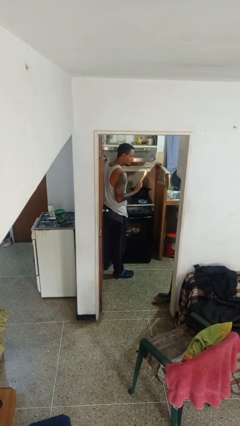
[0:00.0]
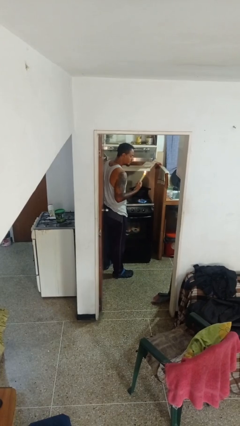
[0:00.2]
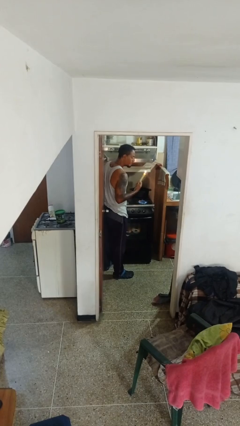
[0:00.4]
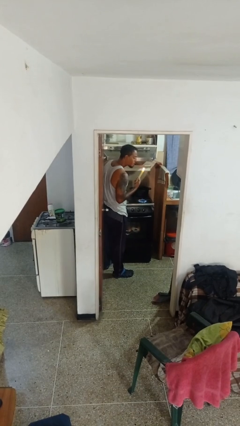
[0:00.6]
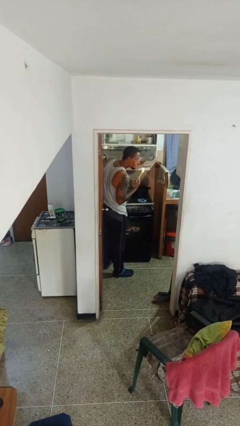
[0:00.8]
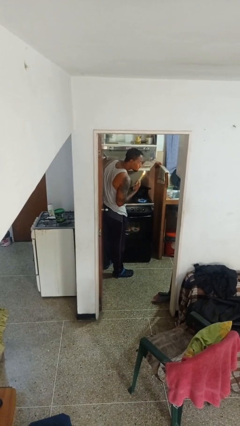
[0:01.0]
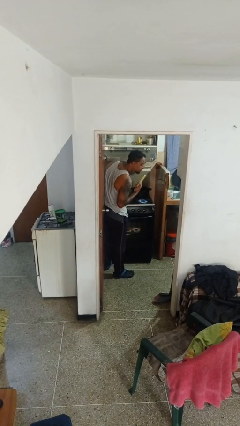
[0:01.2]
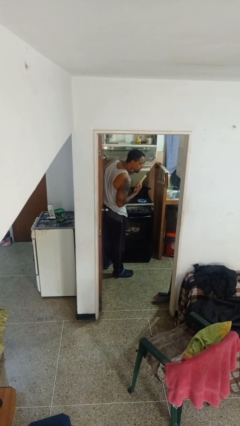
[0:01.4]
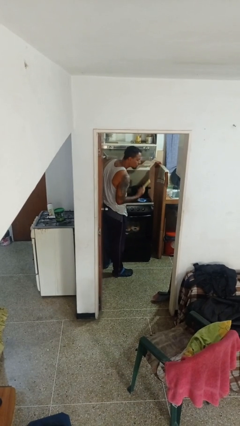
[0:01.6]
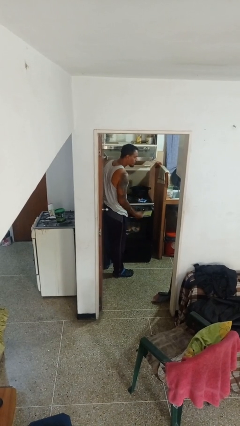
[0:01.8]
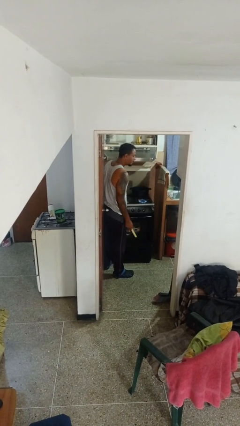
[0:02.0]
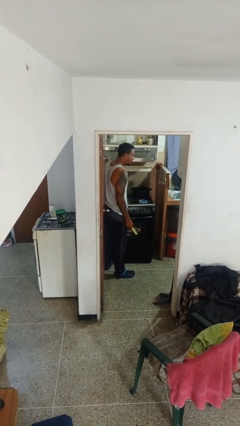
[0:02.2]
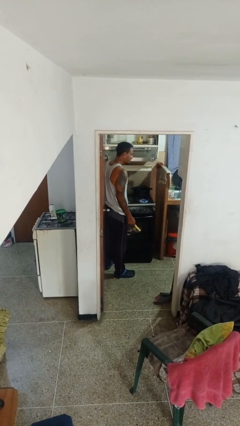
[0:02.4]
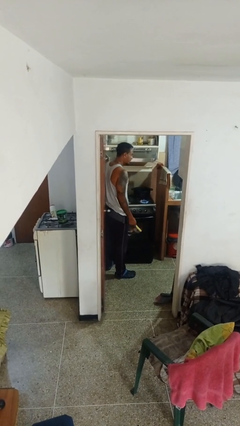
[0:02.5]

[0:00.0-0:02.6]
person extinguishes candle

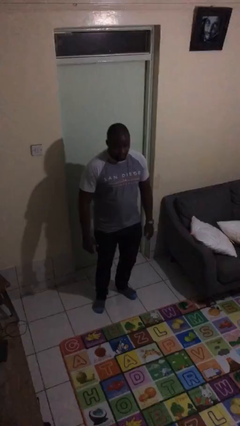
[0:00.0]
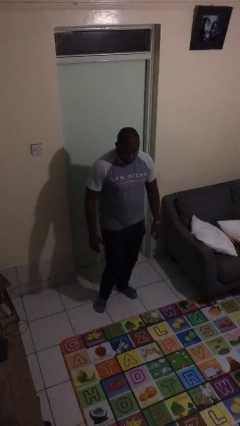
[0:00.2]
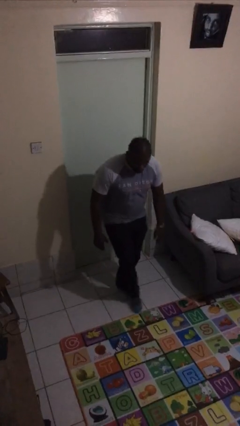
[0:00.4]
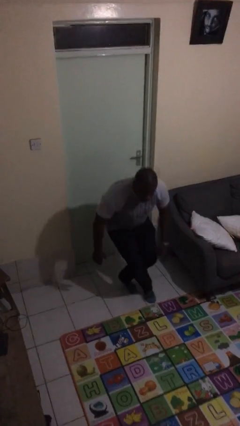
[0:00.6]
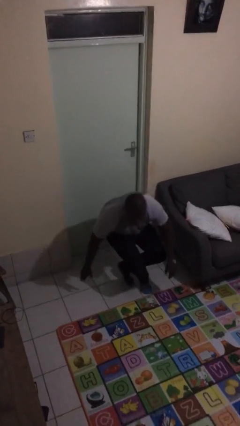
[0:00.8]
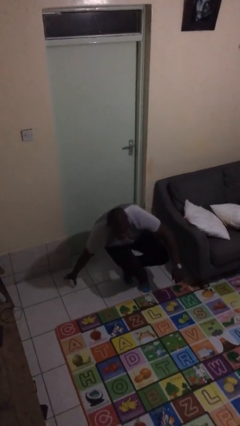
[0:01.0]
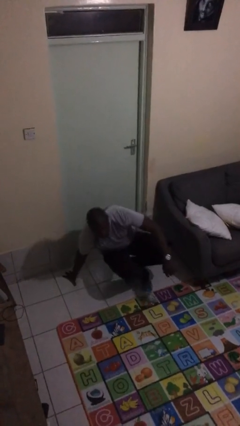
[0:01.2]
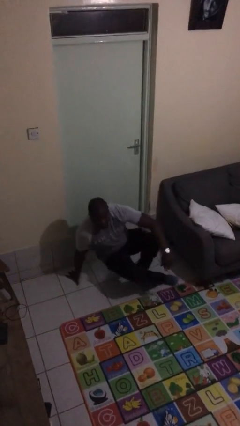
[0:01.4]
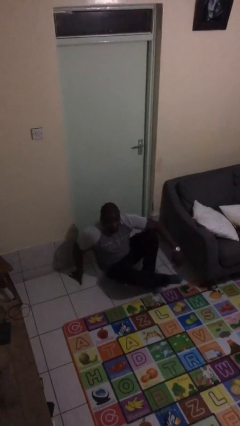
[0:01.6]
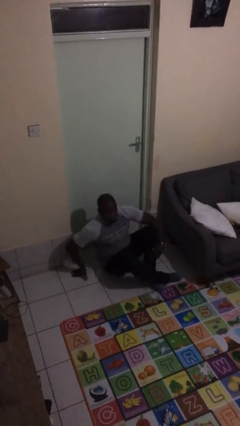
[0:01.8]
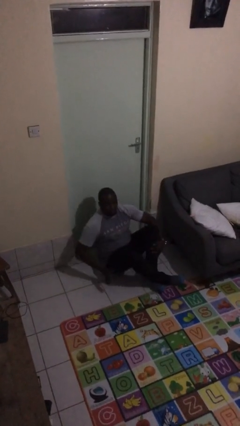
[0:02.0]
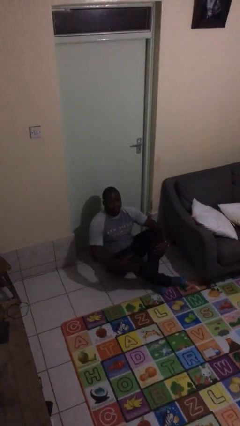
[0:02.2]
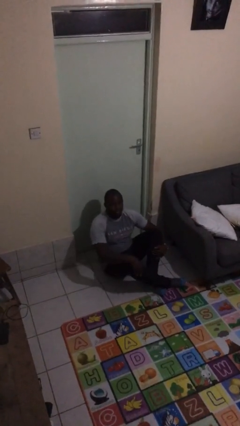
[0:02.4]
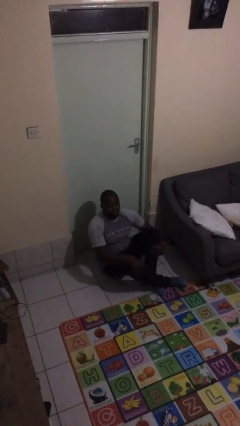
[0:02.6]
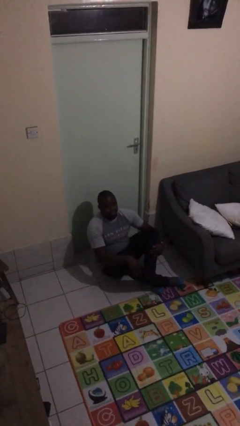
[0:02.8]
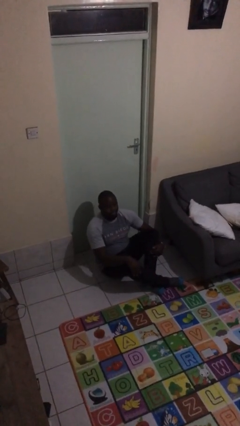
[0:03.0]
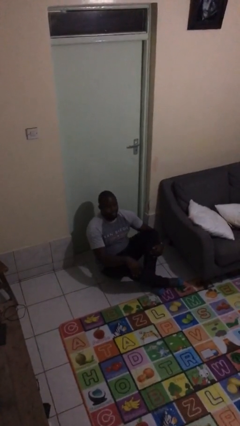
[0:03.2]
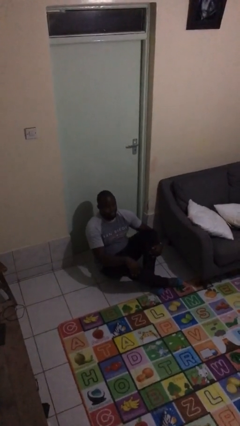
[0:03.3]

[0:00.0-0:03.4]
person sits crisscross

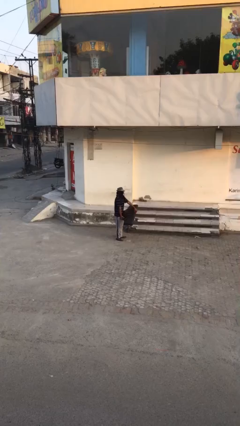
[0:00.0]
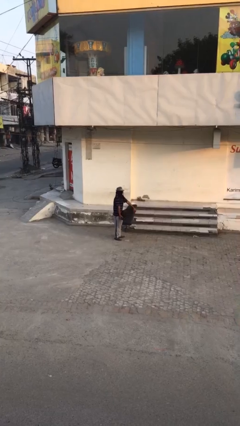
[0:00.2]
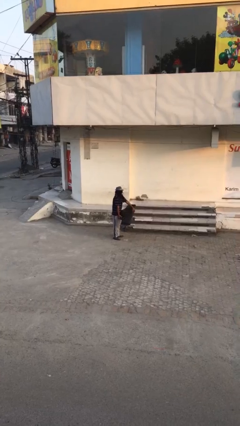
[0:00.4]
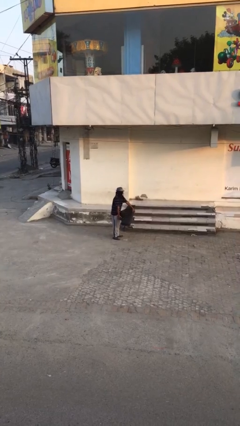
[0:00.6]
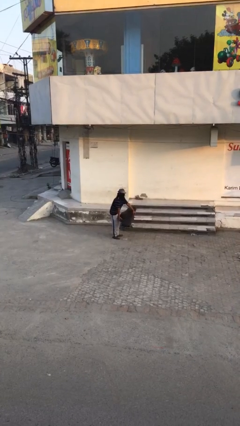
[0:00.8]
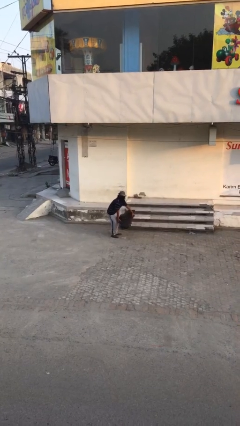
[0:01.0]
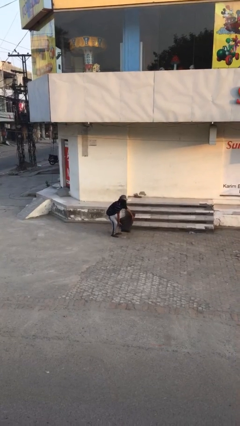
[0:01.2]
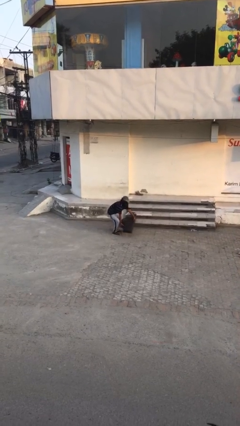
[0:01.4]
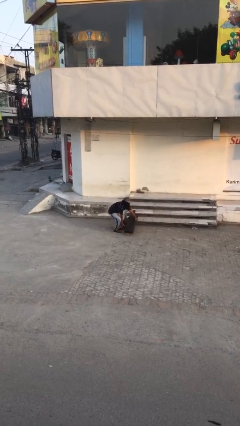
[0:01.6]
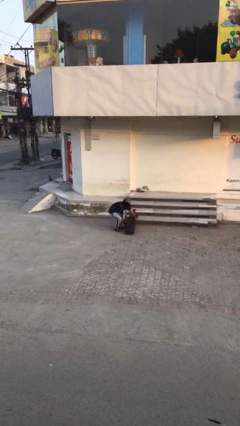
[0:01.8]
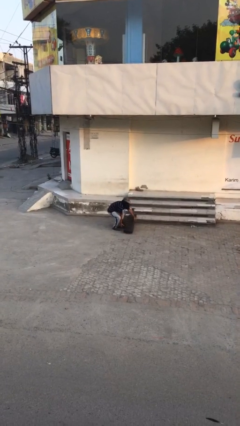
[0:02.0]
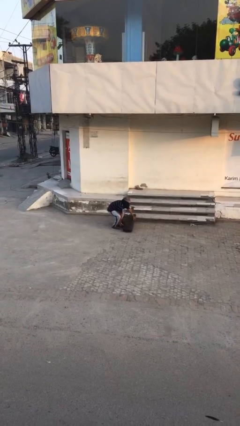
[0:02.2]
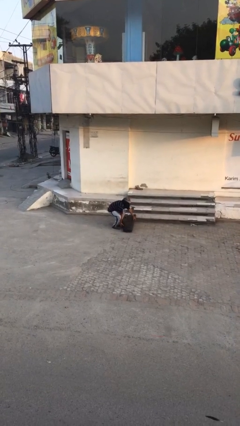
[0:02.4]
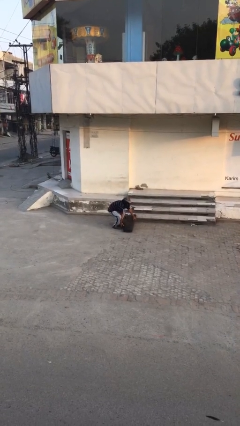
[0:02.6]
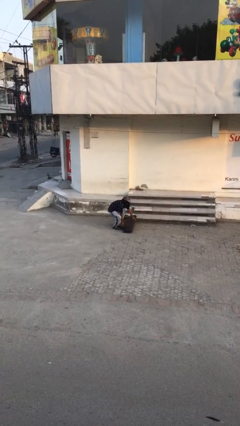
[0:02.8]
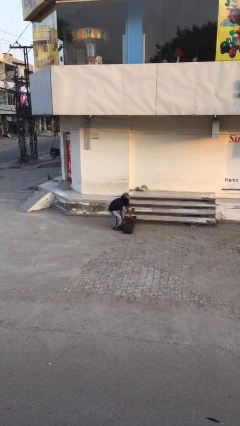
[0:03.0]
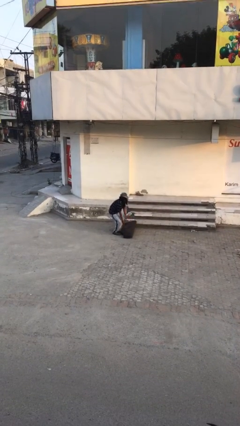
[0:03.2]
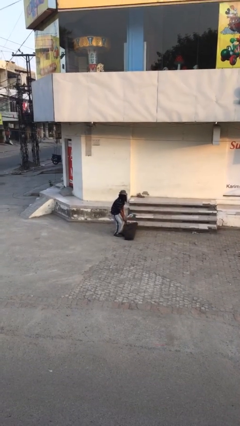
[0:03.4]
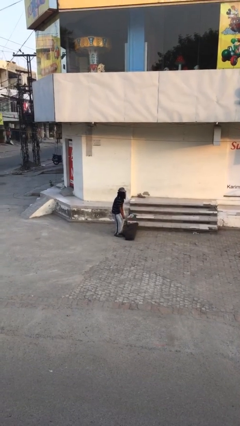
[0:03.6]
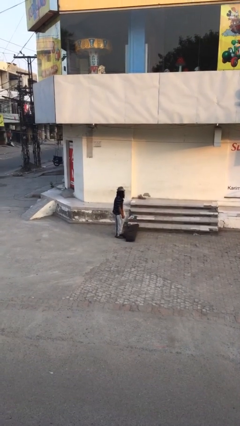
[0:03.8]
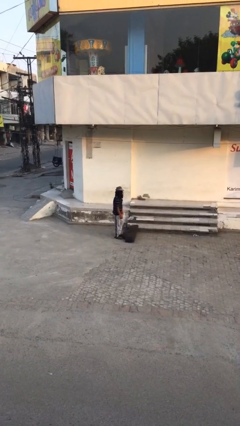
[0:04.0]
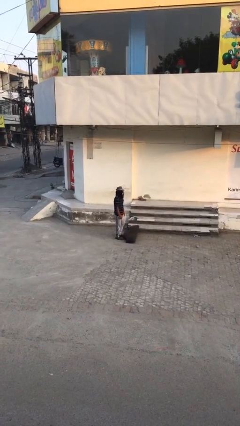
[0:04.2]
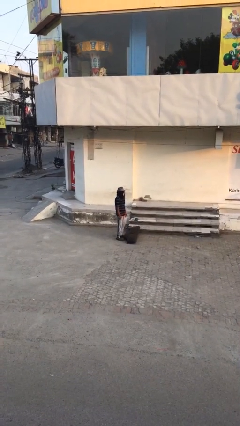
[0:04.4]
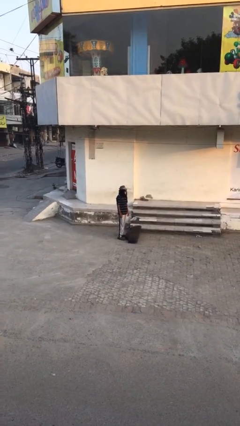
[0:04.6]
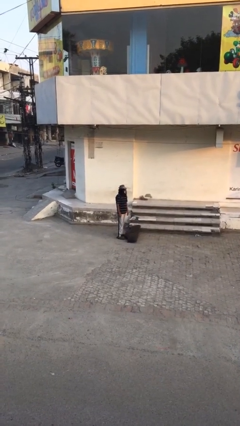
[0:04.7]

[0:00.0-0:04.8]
person puts down object on floor

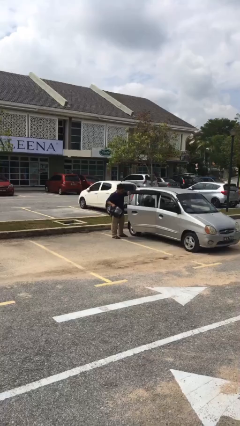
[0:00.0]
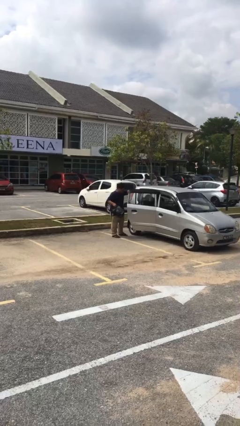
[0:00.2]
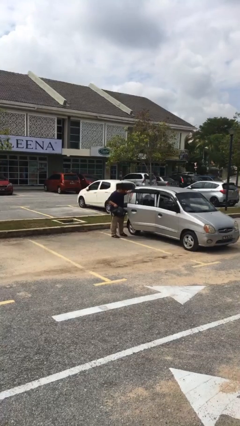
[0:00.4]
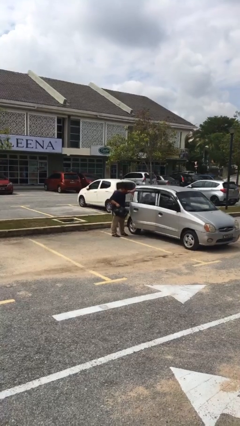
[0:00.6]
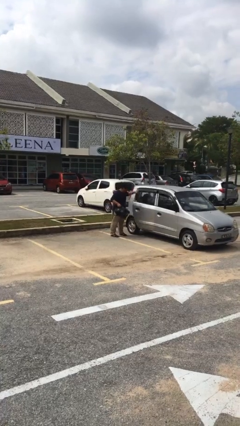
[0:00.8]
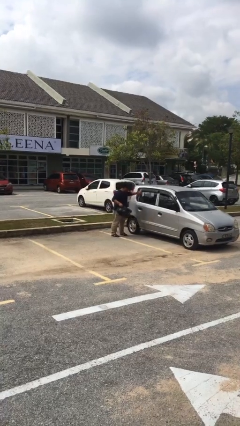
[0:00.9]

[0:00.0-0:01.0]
person closes car door

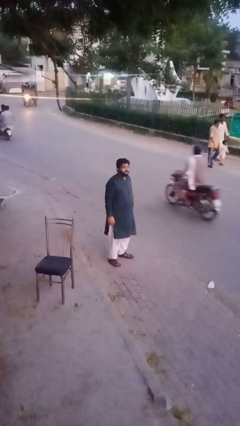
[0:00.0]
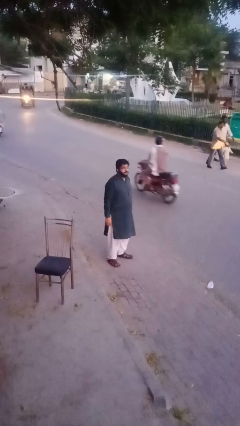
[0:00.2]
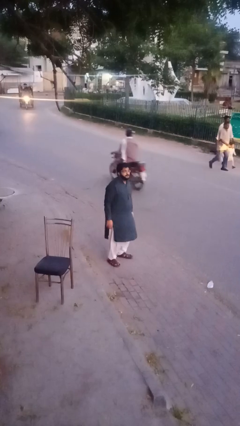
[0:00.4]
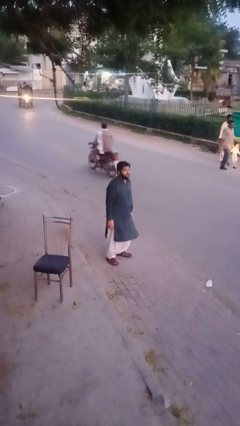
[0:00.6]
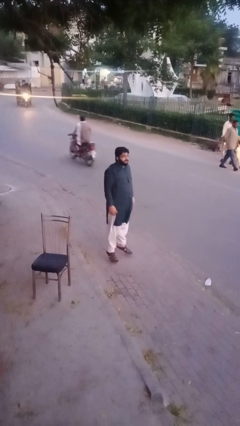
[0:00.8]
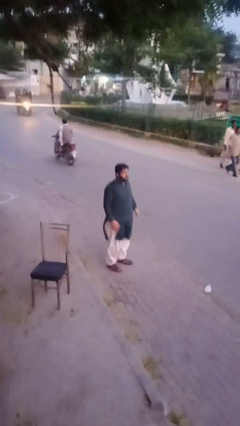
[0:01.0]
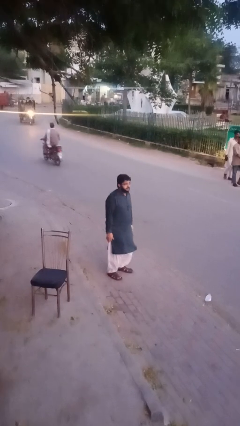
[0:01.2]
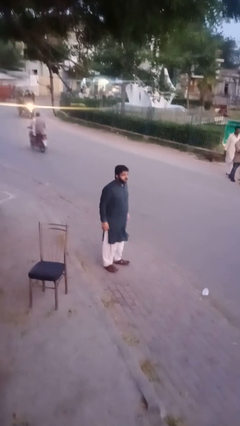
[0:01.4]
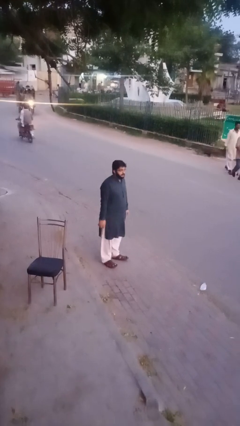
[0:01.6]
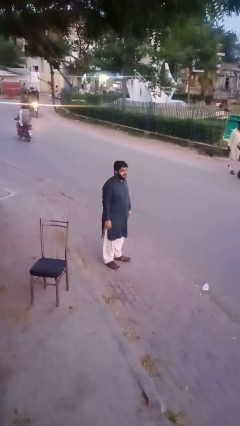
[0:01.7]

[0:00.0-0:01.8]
person jumps

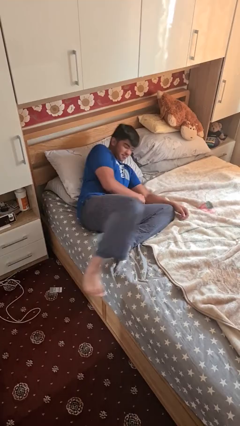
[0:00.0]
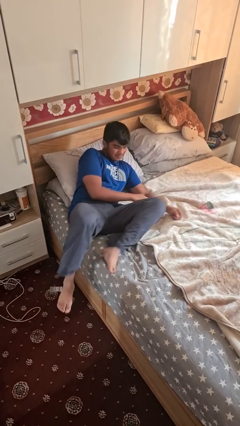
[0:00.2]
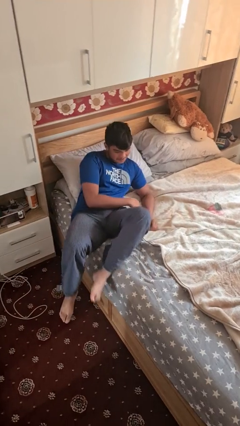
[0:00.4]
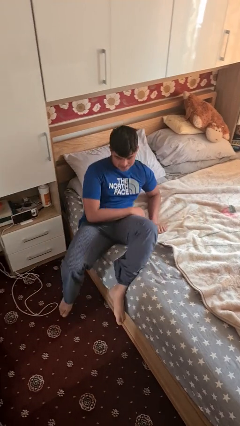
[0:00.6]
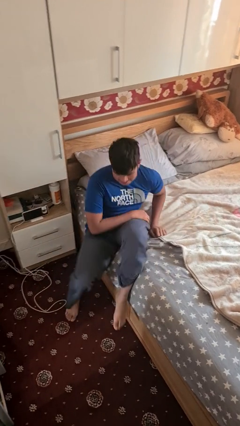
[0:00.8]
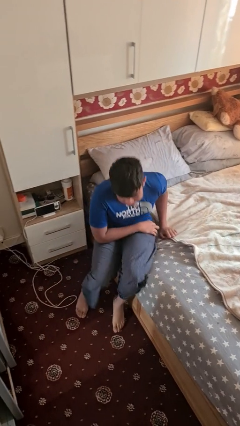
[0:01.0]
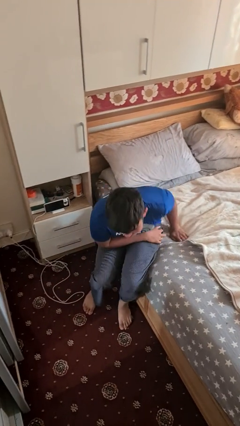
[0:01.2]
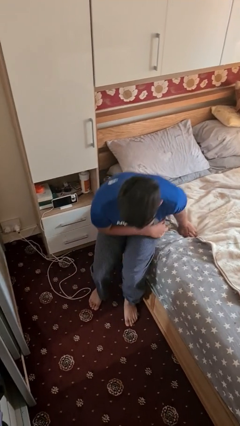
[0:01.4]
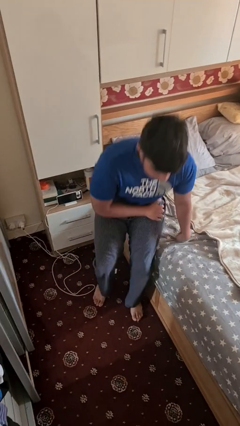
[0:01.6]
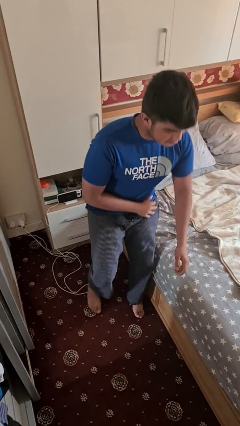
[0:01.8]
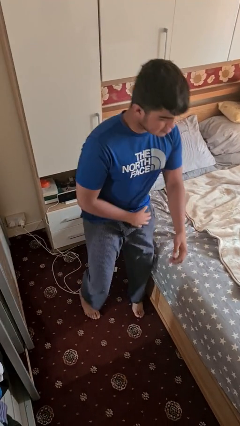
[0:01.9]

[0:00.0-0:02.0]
person stands up

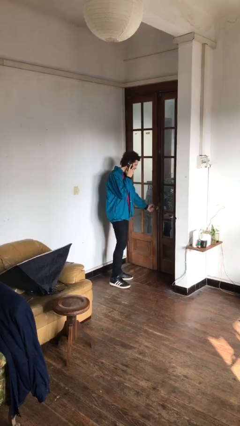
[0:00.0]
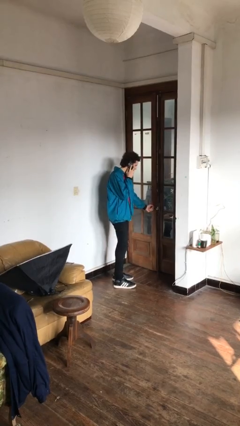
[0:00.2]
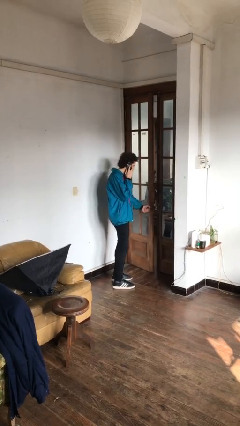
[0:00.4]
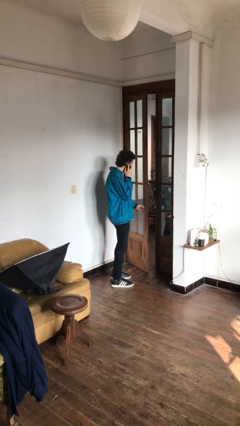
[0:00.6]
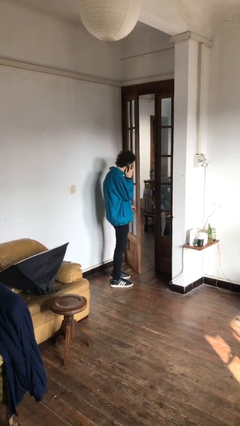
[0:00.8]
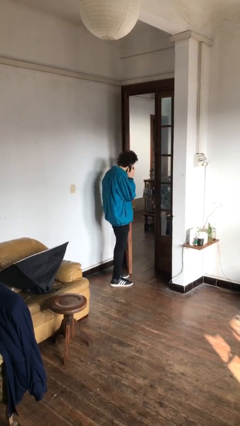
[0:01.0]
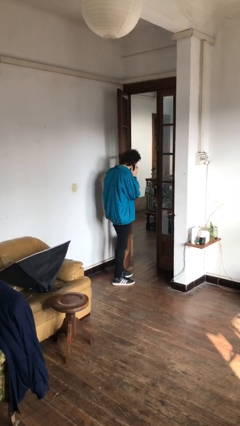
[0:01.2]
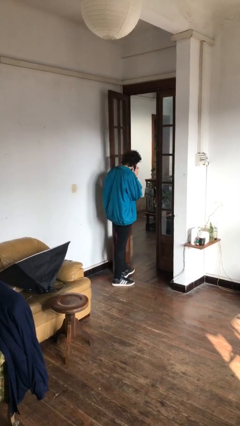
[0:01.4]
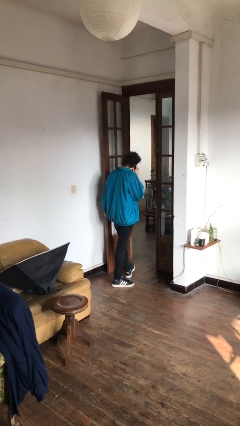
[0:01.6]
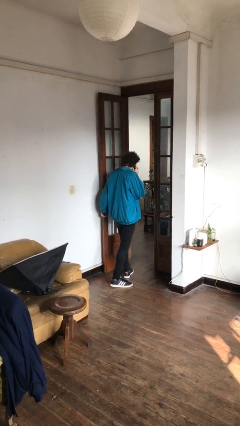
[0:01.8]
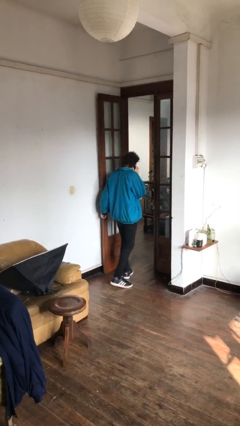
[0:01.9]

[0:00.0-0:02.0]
person opens facility door
